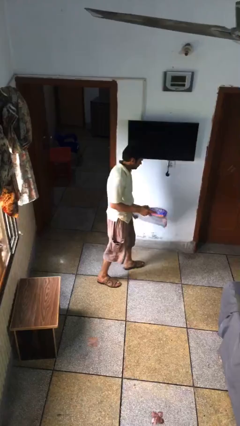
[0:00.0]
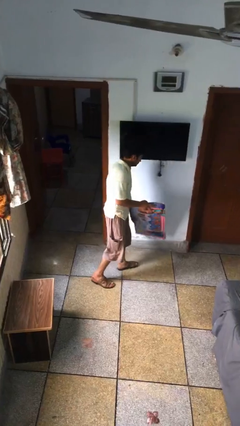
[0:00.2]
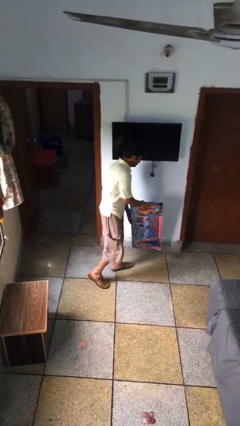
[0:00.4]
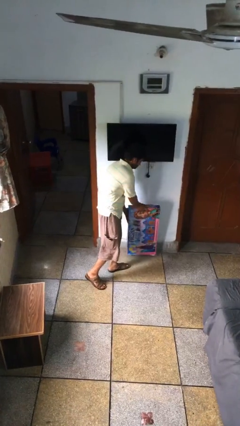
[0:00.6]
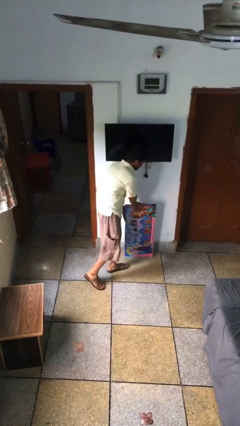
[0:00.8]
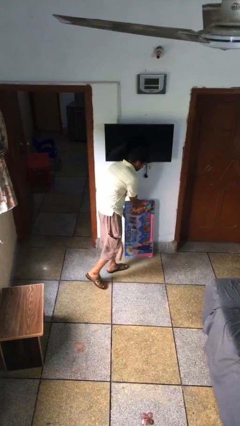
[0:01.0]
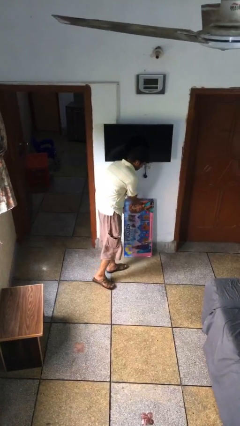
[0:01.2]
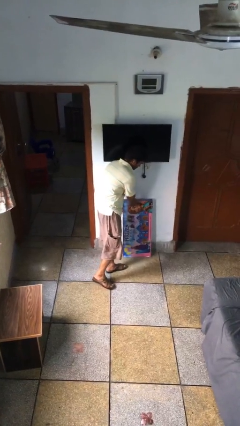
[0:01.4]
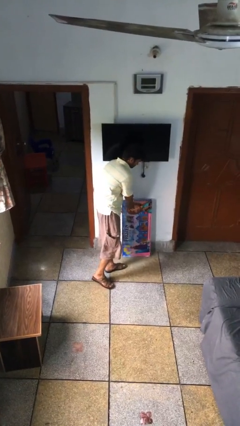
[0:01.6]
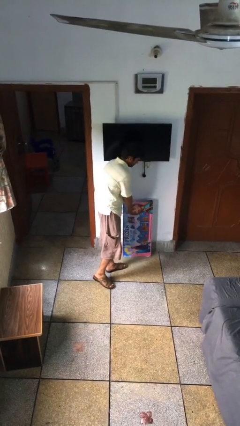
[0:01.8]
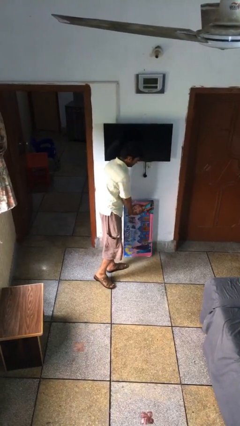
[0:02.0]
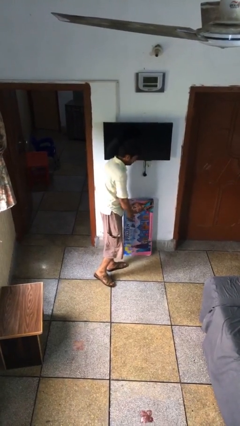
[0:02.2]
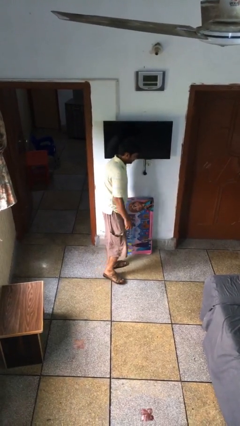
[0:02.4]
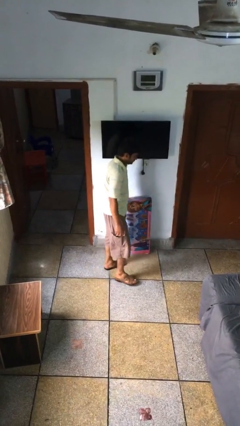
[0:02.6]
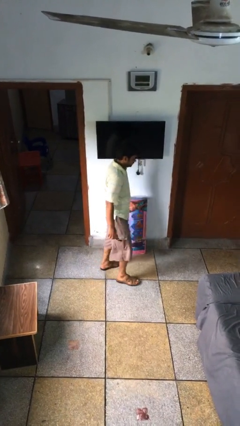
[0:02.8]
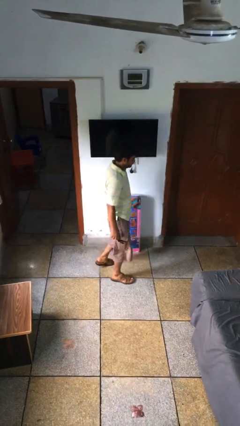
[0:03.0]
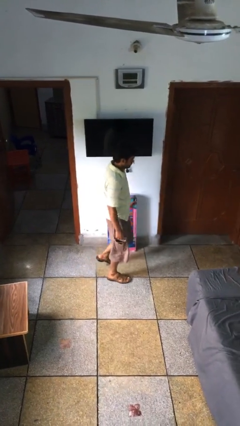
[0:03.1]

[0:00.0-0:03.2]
person puts down object on floor

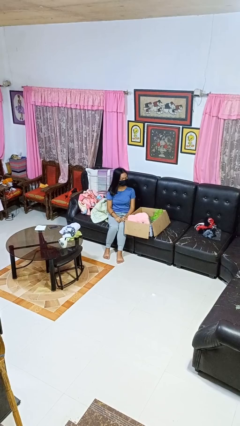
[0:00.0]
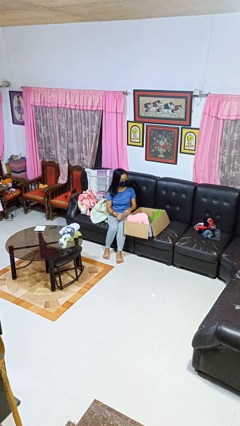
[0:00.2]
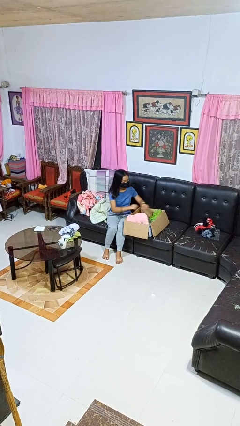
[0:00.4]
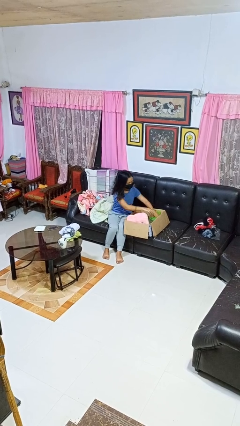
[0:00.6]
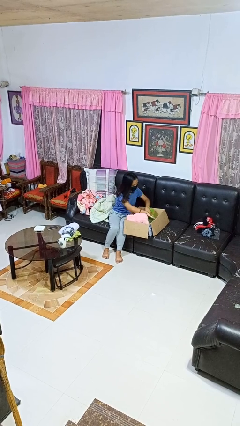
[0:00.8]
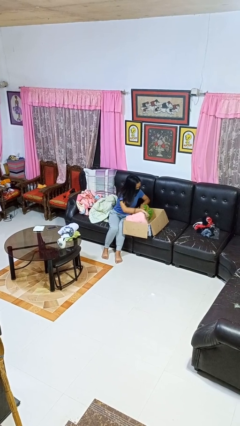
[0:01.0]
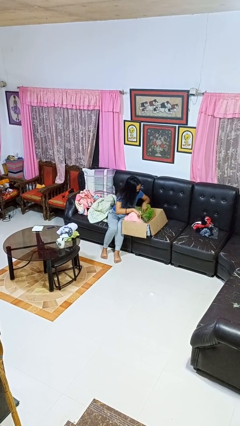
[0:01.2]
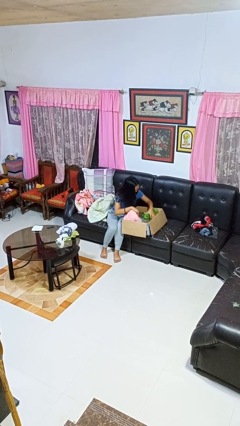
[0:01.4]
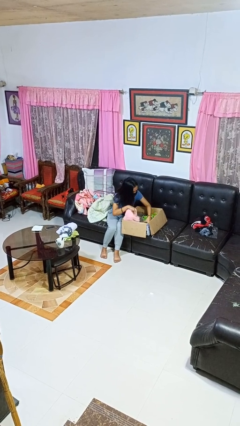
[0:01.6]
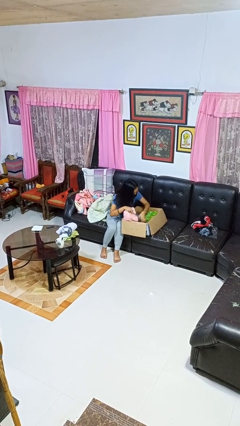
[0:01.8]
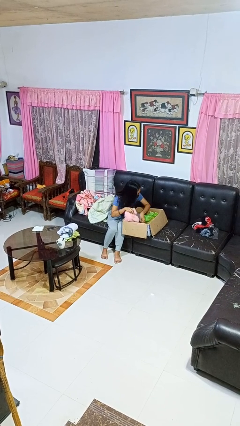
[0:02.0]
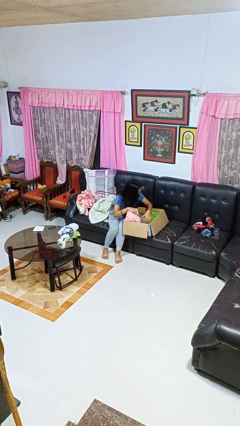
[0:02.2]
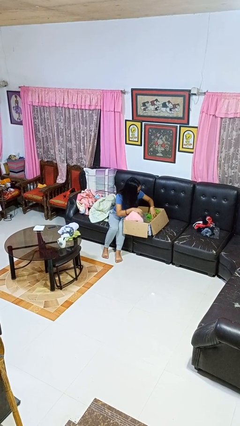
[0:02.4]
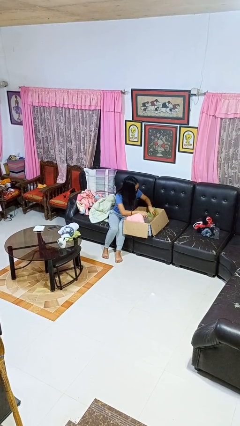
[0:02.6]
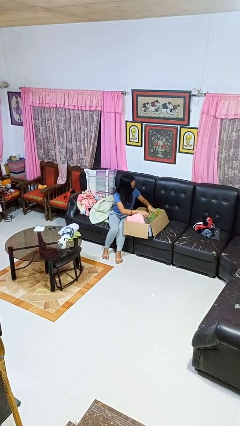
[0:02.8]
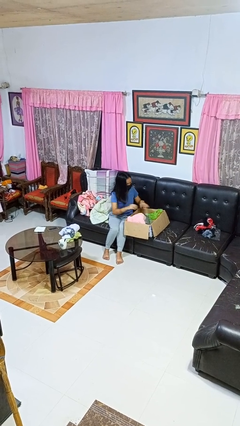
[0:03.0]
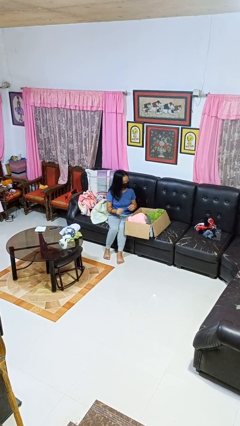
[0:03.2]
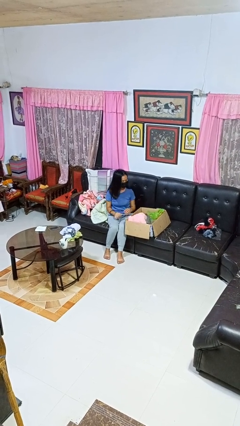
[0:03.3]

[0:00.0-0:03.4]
person searches in box

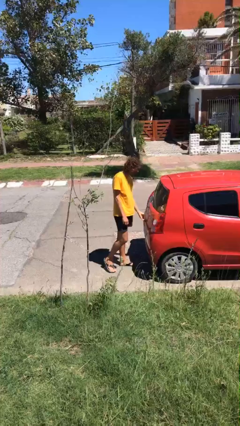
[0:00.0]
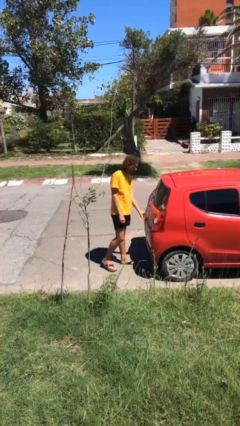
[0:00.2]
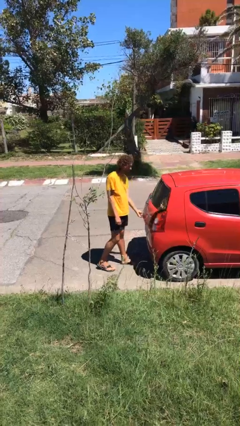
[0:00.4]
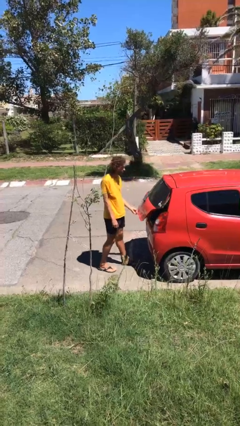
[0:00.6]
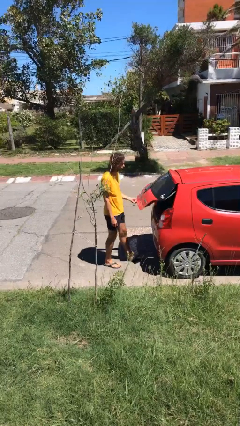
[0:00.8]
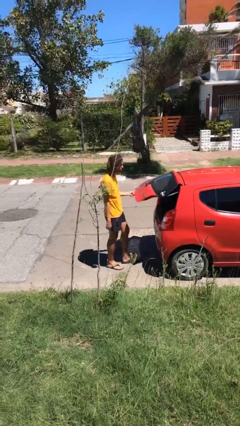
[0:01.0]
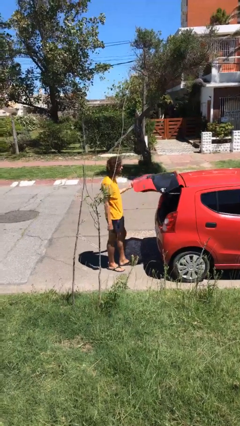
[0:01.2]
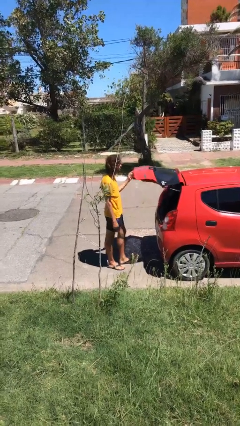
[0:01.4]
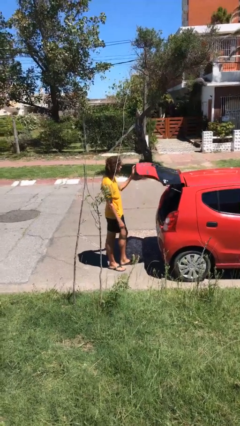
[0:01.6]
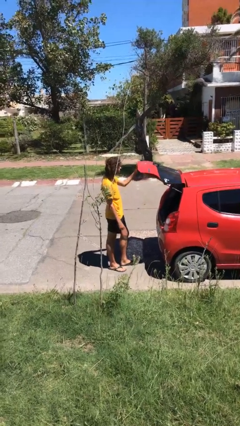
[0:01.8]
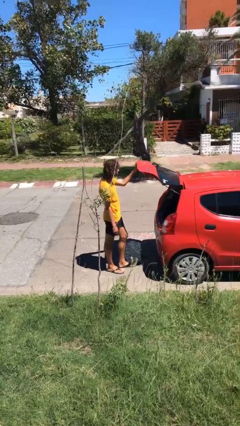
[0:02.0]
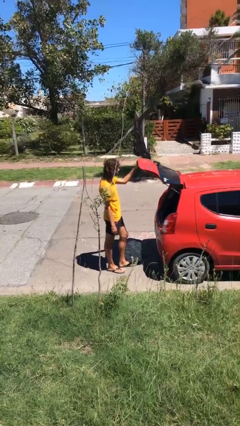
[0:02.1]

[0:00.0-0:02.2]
person opens car trunk

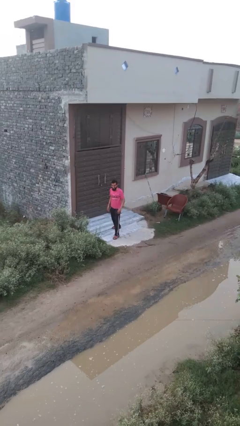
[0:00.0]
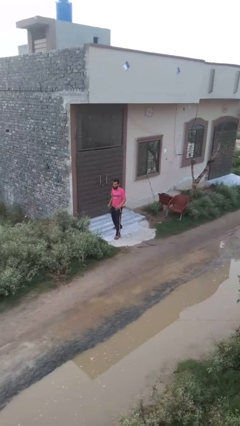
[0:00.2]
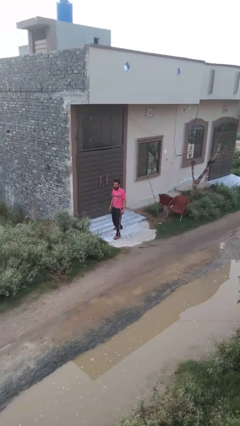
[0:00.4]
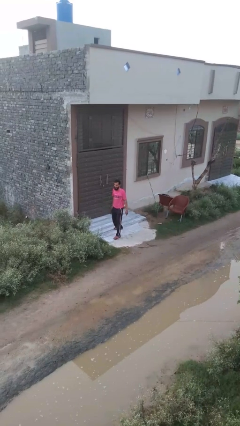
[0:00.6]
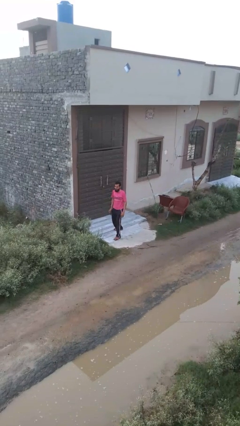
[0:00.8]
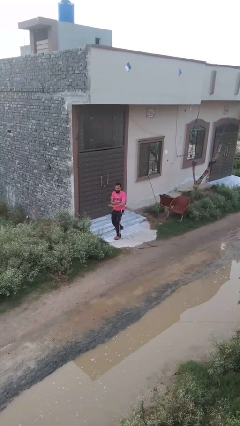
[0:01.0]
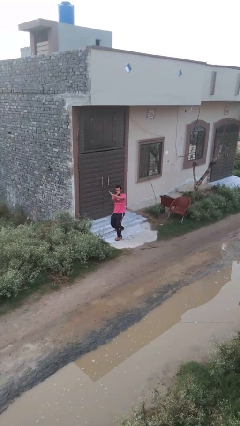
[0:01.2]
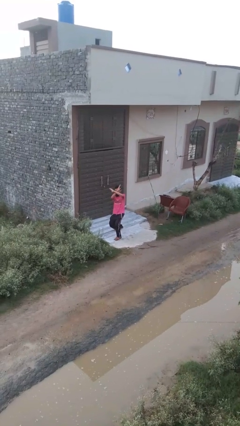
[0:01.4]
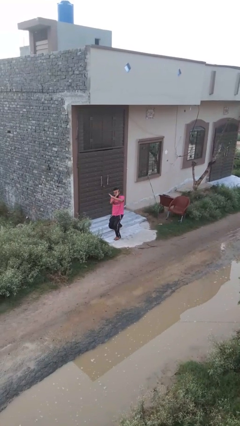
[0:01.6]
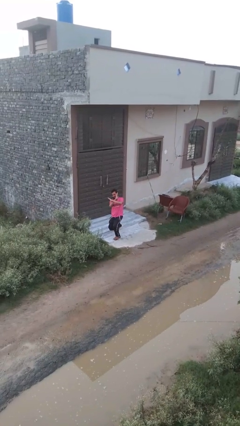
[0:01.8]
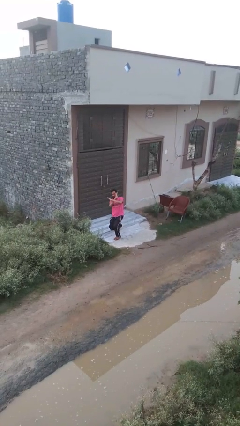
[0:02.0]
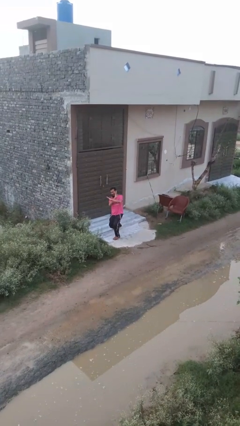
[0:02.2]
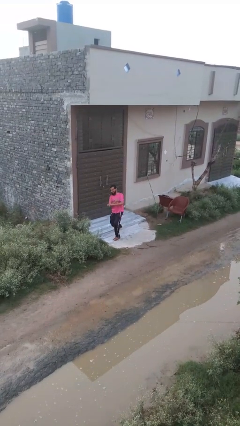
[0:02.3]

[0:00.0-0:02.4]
person crosses arms

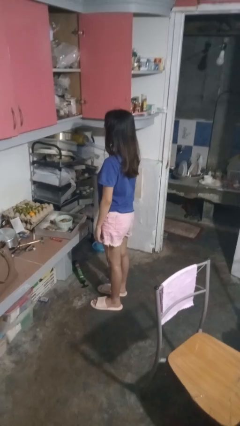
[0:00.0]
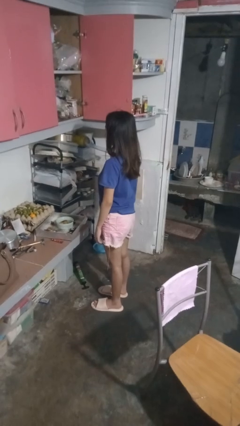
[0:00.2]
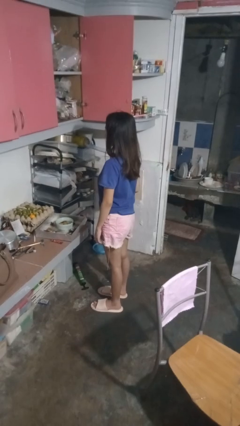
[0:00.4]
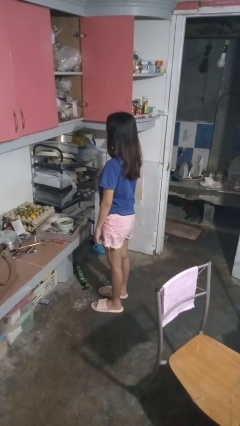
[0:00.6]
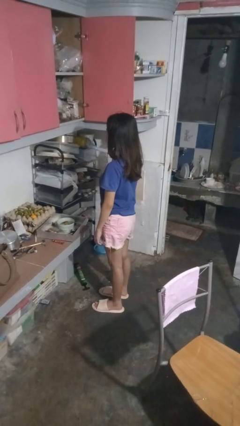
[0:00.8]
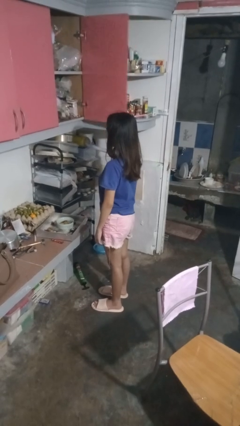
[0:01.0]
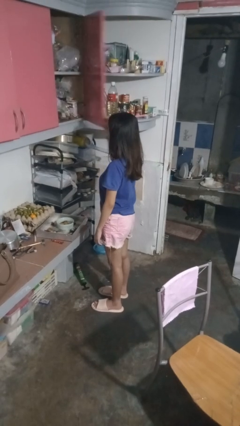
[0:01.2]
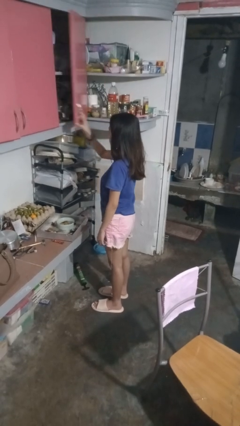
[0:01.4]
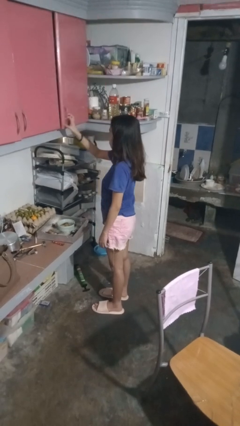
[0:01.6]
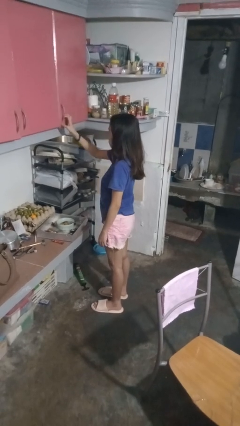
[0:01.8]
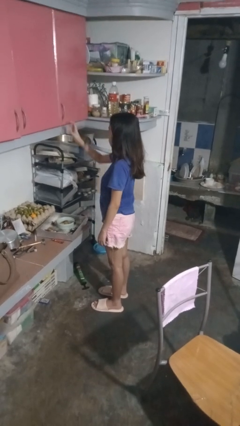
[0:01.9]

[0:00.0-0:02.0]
person closes cabinet

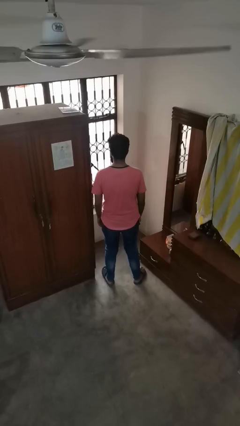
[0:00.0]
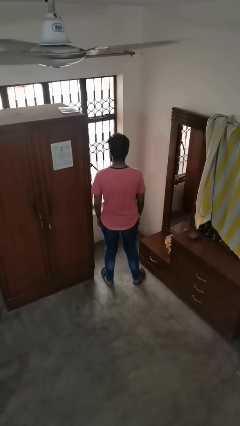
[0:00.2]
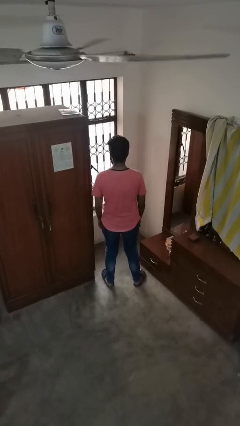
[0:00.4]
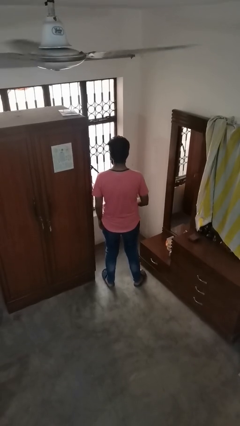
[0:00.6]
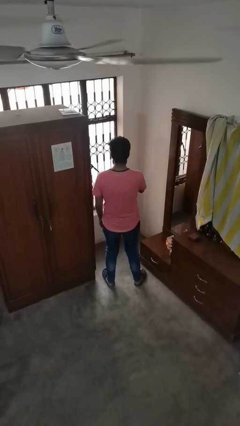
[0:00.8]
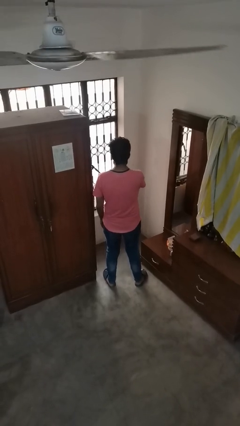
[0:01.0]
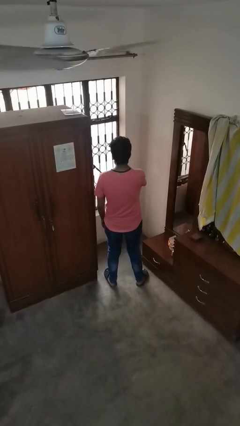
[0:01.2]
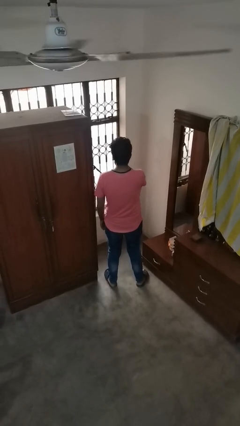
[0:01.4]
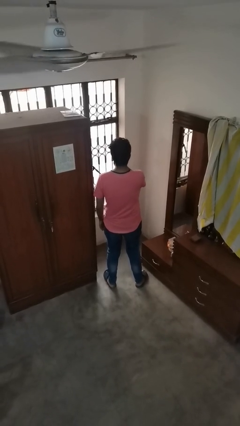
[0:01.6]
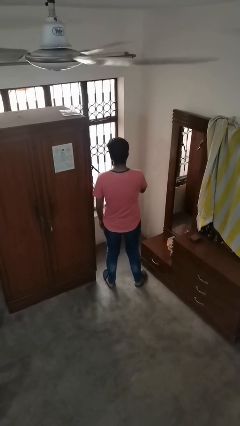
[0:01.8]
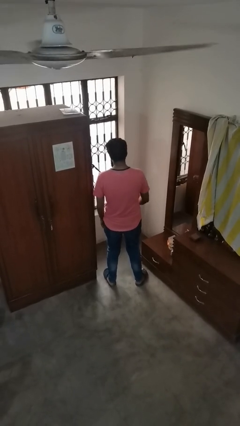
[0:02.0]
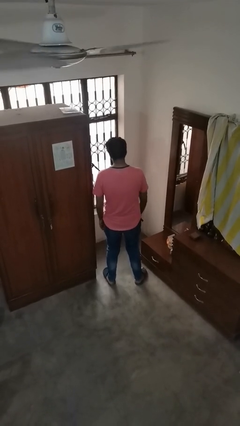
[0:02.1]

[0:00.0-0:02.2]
person vapes

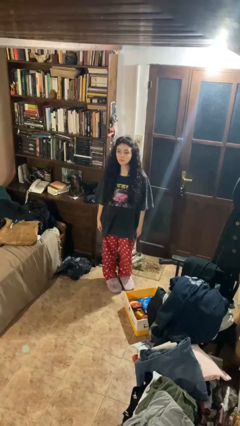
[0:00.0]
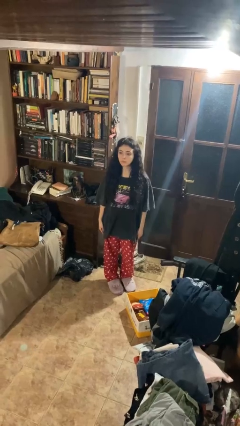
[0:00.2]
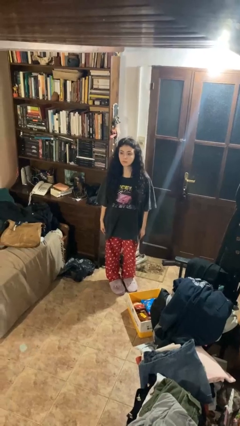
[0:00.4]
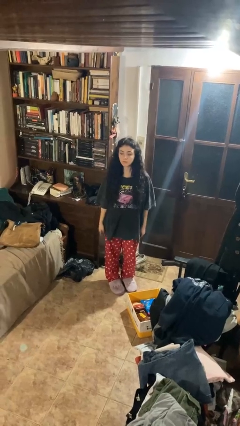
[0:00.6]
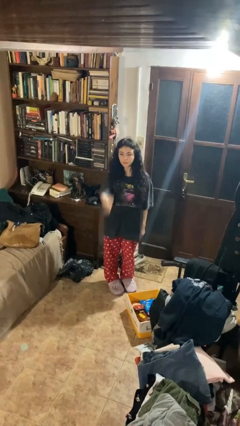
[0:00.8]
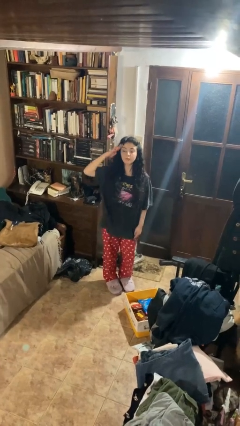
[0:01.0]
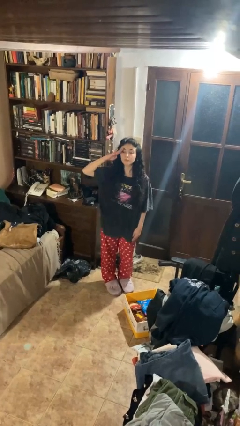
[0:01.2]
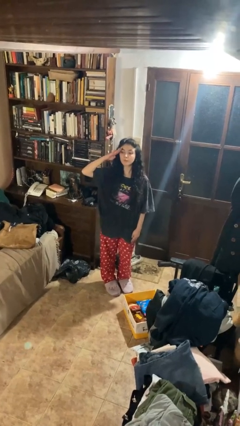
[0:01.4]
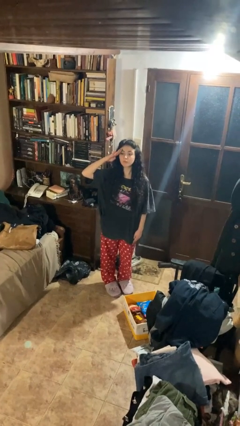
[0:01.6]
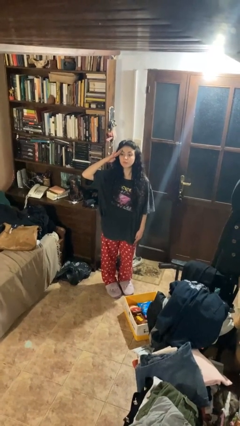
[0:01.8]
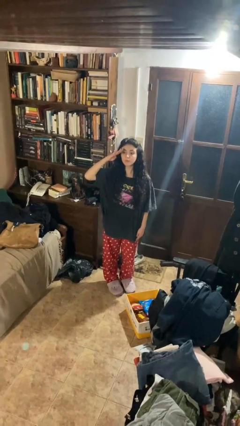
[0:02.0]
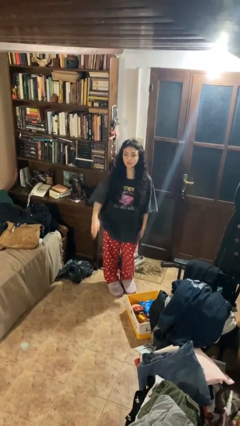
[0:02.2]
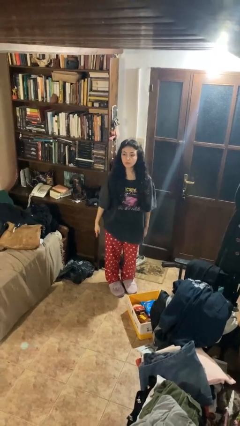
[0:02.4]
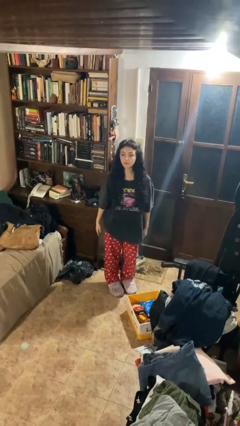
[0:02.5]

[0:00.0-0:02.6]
person salutes
